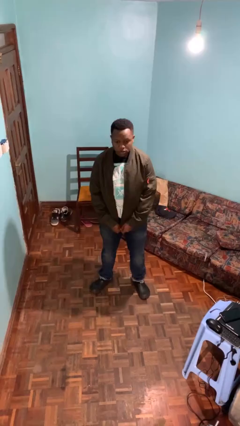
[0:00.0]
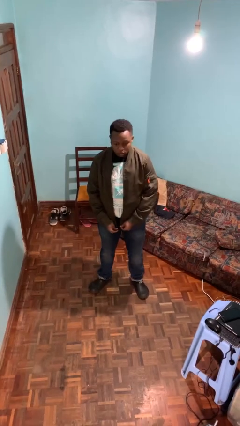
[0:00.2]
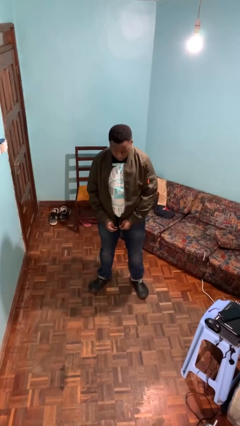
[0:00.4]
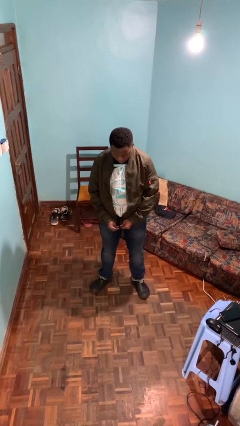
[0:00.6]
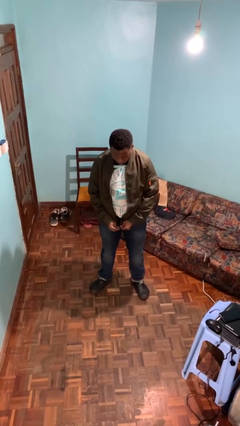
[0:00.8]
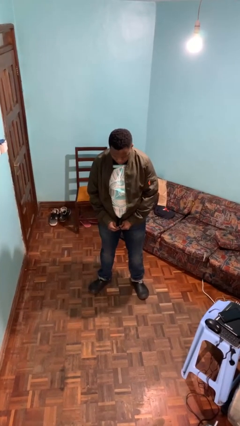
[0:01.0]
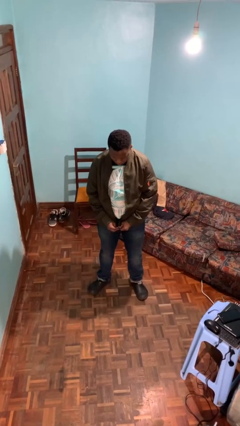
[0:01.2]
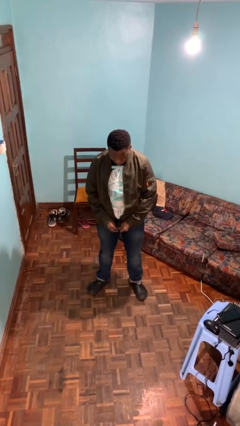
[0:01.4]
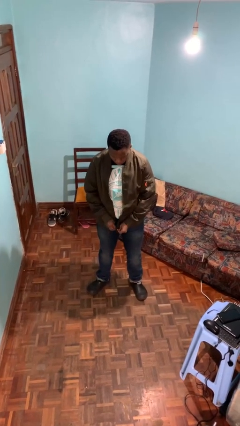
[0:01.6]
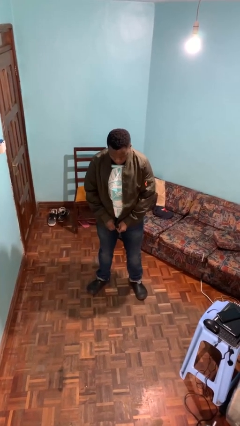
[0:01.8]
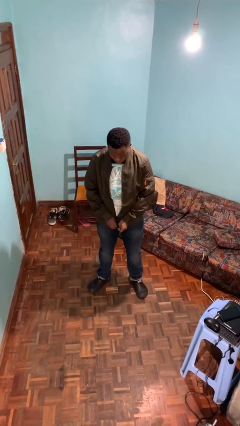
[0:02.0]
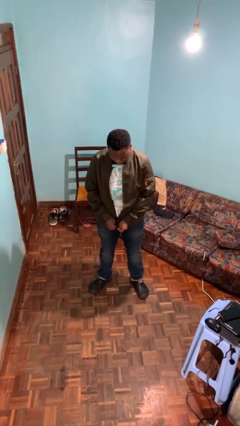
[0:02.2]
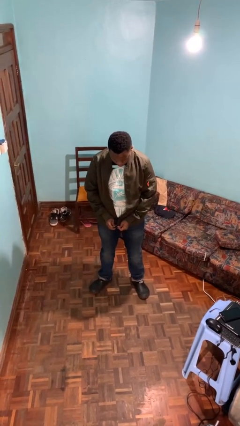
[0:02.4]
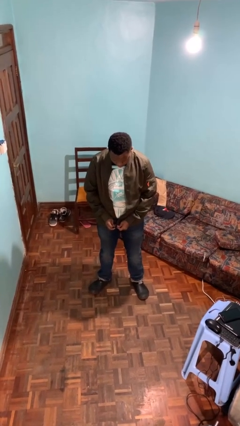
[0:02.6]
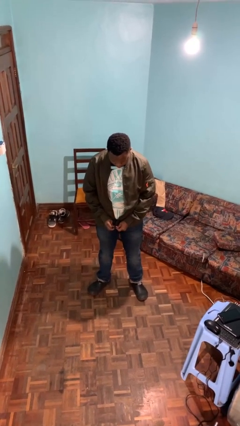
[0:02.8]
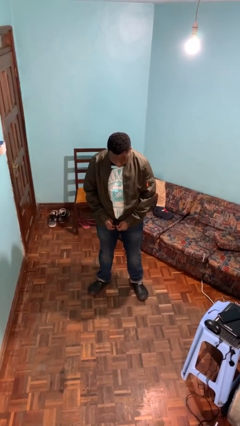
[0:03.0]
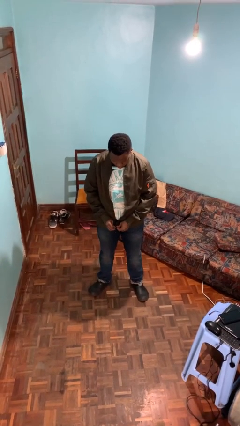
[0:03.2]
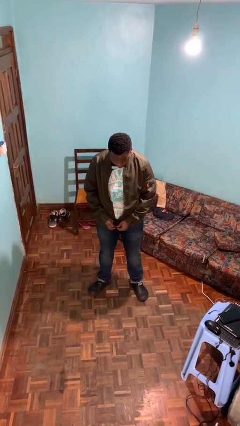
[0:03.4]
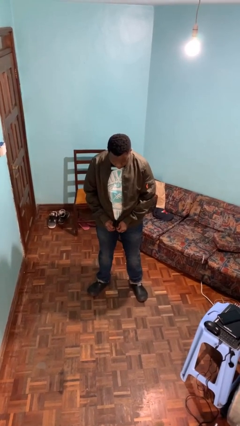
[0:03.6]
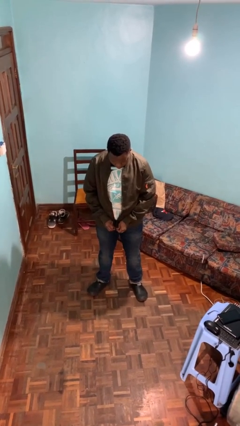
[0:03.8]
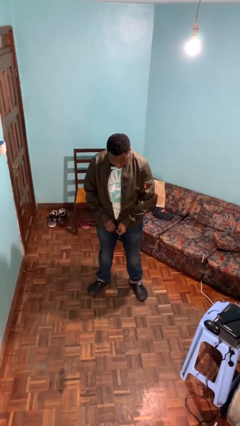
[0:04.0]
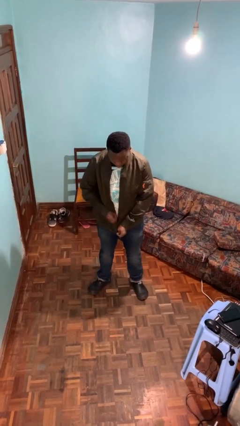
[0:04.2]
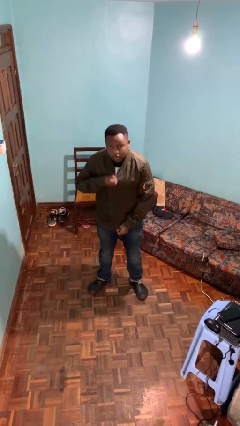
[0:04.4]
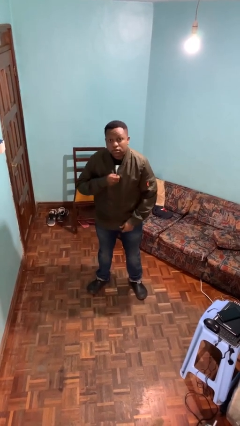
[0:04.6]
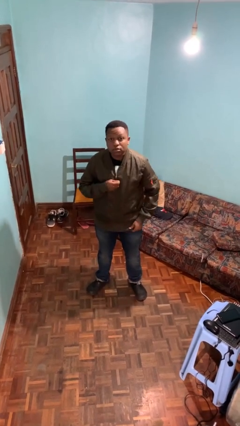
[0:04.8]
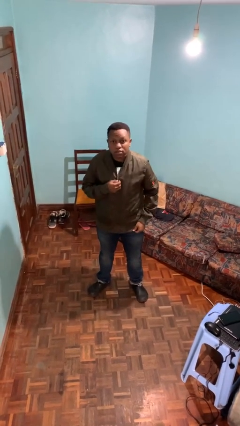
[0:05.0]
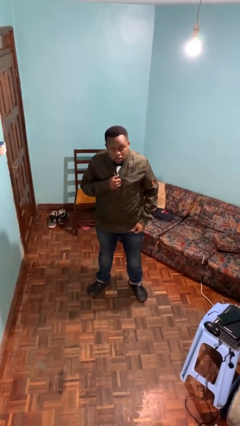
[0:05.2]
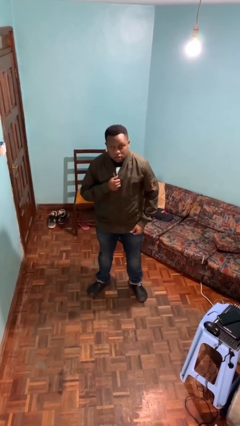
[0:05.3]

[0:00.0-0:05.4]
person zips up jacket

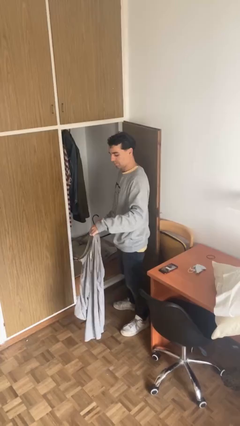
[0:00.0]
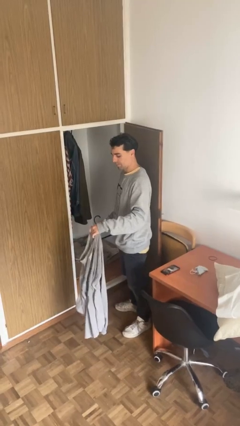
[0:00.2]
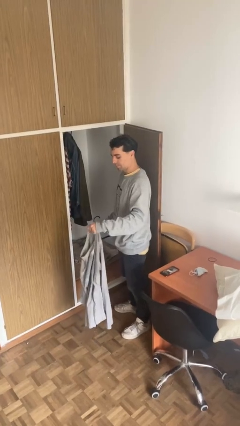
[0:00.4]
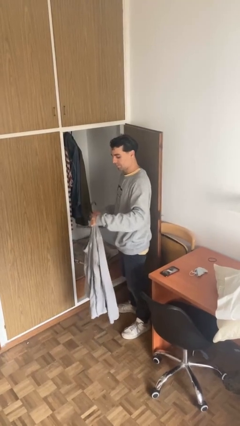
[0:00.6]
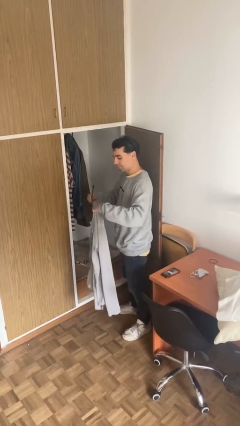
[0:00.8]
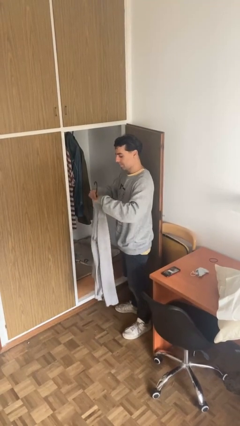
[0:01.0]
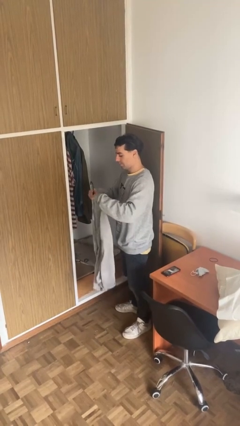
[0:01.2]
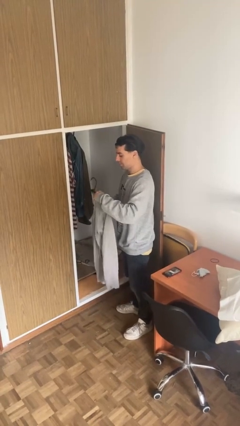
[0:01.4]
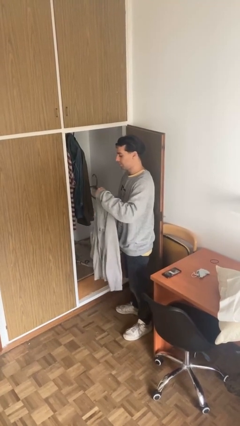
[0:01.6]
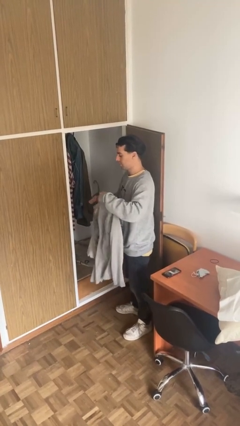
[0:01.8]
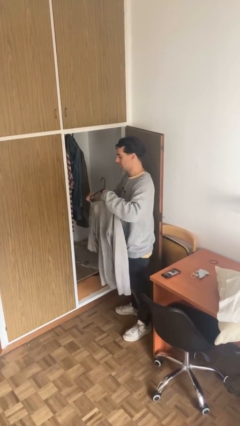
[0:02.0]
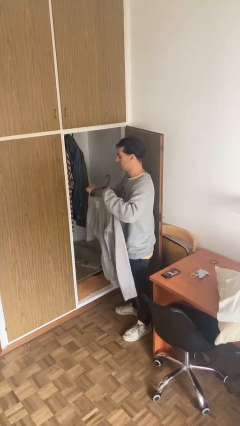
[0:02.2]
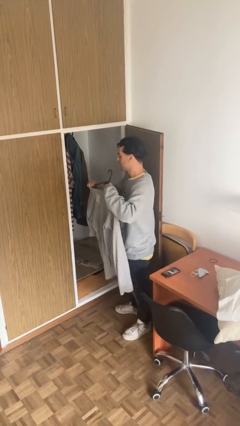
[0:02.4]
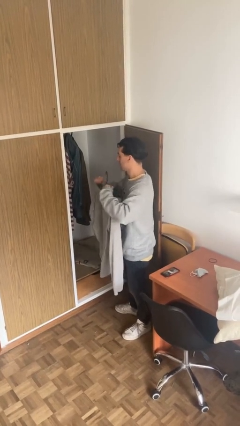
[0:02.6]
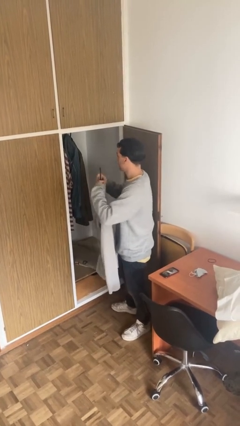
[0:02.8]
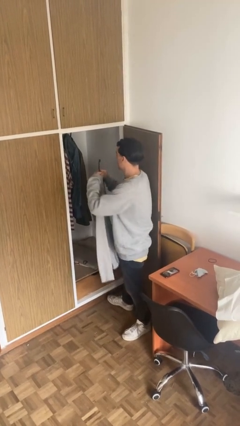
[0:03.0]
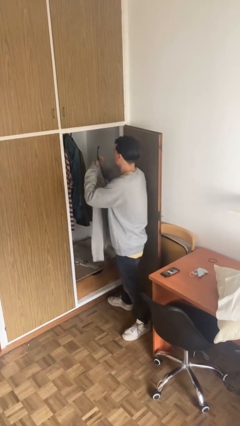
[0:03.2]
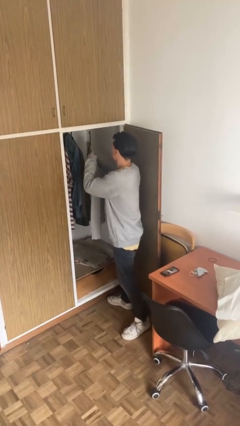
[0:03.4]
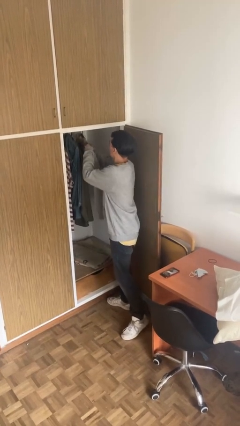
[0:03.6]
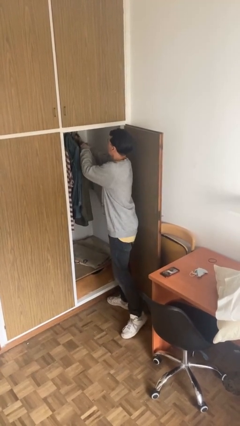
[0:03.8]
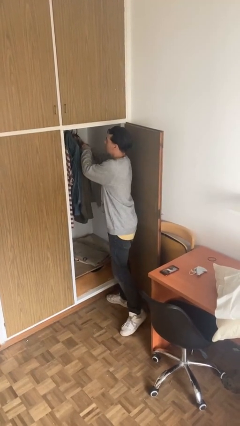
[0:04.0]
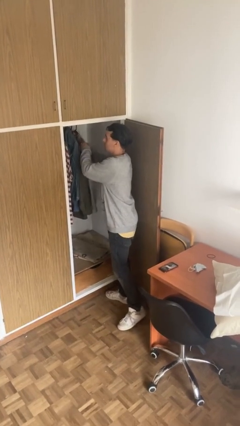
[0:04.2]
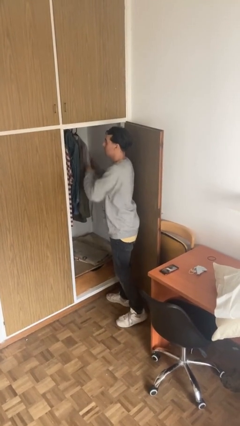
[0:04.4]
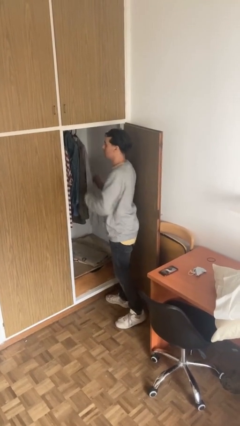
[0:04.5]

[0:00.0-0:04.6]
person puts clothes into closet

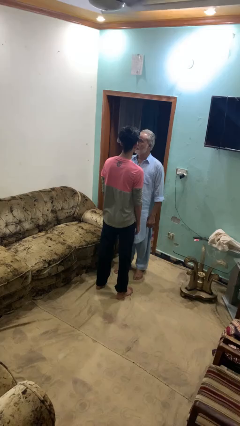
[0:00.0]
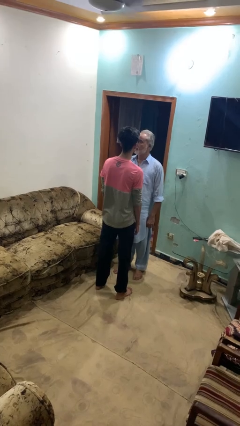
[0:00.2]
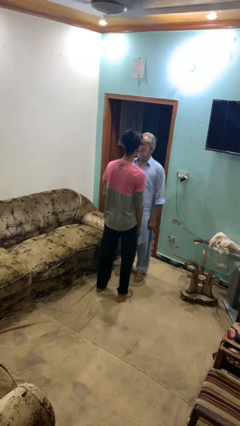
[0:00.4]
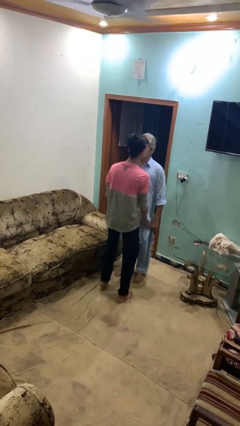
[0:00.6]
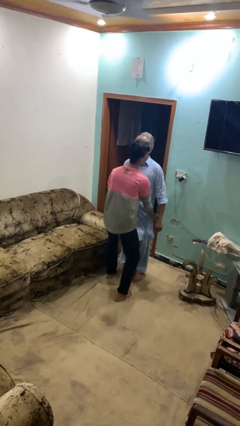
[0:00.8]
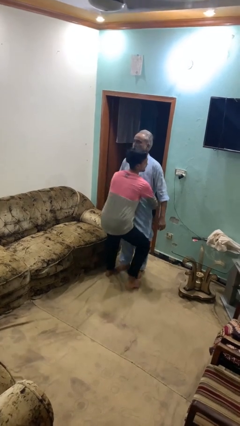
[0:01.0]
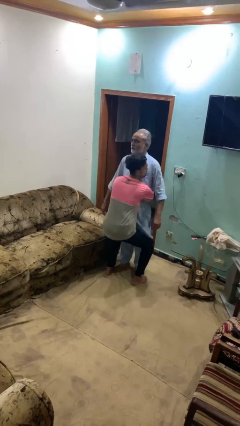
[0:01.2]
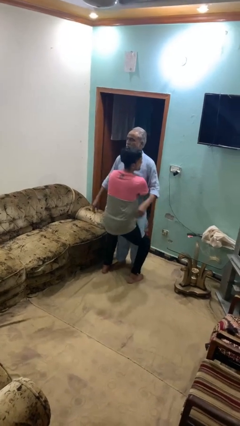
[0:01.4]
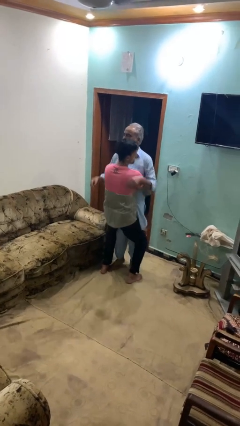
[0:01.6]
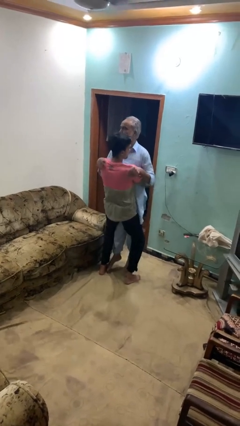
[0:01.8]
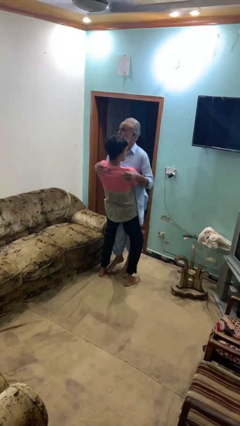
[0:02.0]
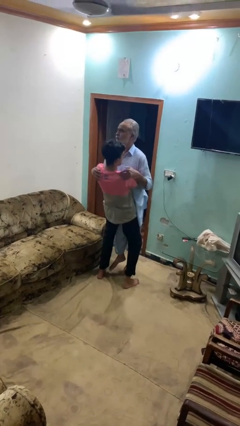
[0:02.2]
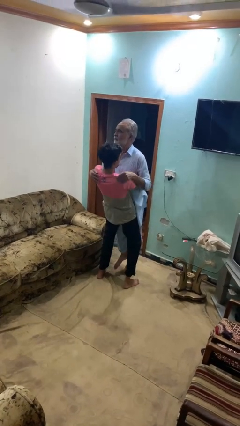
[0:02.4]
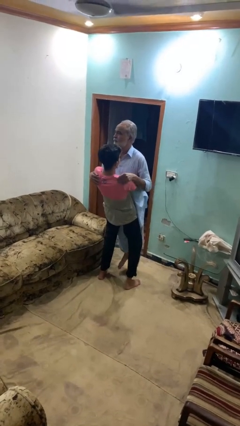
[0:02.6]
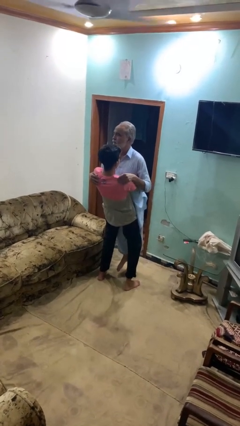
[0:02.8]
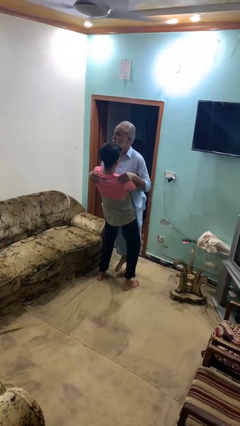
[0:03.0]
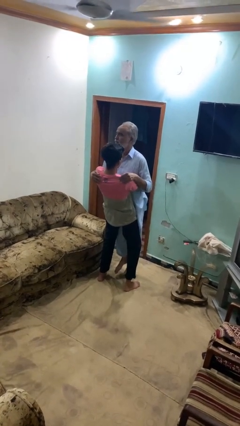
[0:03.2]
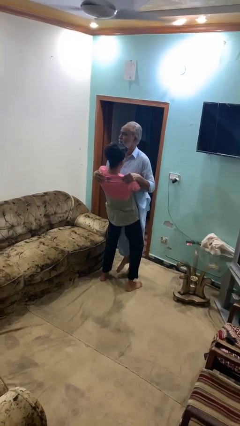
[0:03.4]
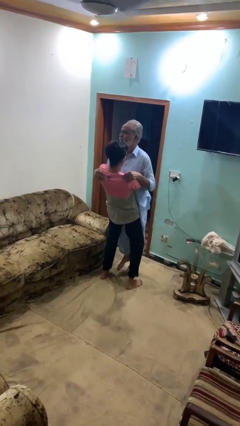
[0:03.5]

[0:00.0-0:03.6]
person picks up person

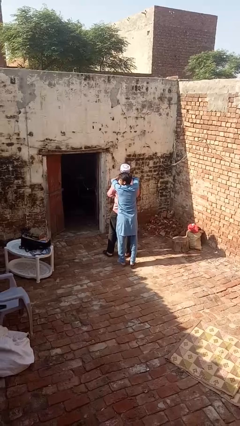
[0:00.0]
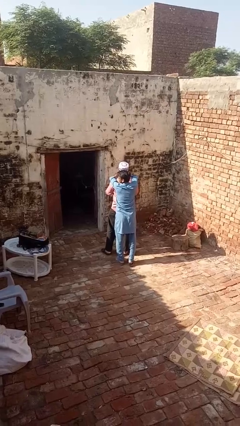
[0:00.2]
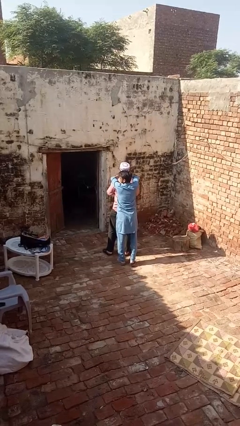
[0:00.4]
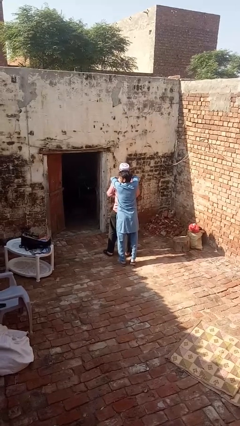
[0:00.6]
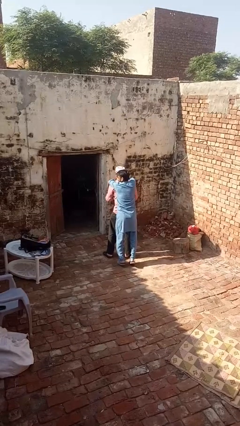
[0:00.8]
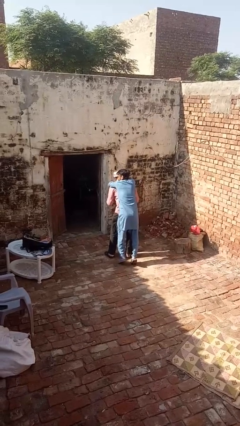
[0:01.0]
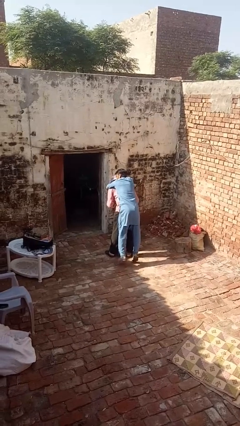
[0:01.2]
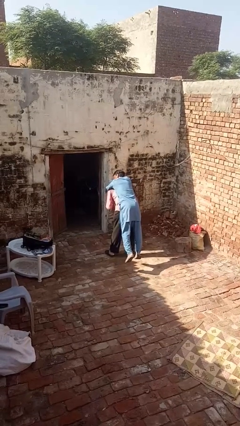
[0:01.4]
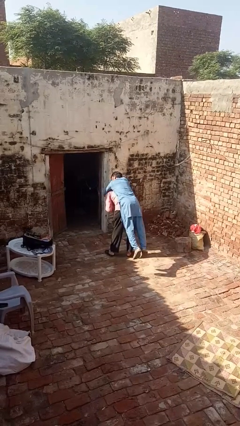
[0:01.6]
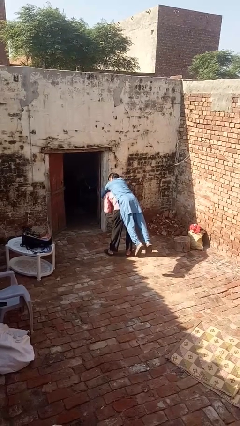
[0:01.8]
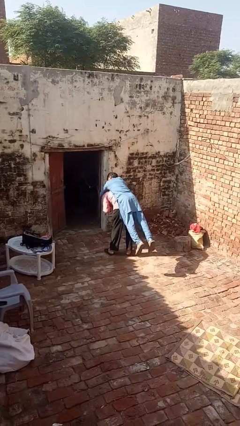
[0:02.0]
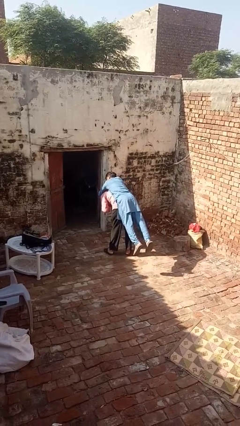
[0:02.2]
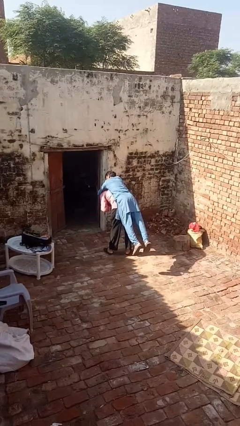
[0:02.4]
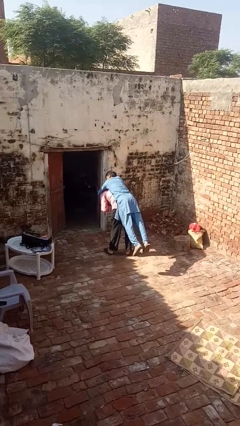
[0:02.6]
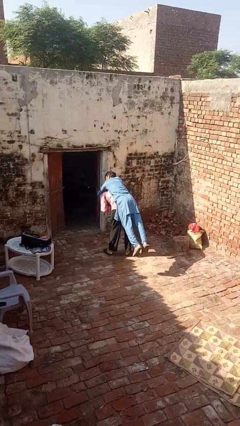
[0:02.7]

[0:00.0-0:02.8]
person carries person over shoulder

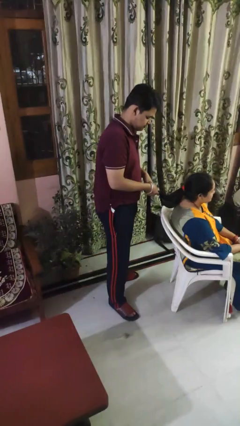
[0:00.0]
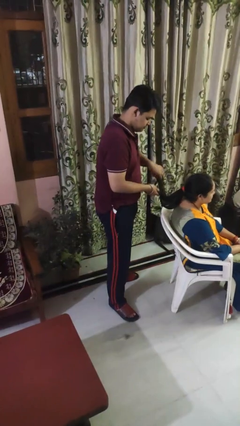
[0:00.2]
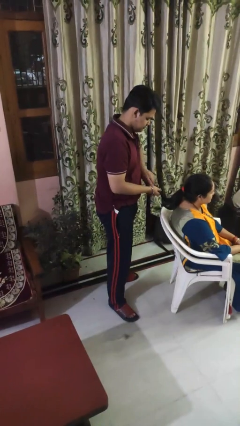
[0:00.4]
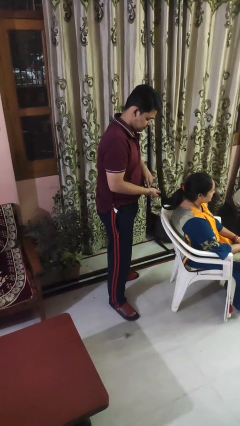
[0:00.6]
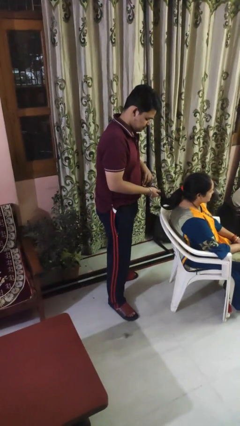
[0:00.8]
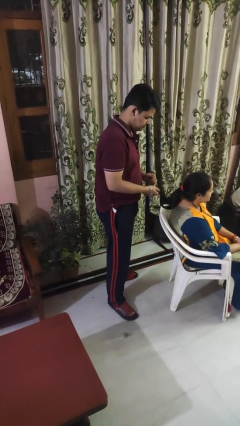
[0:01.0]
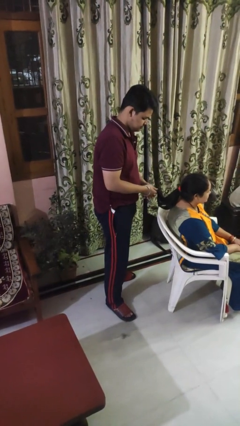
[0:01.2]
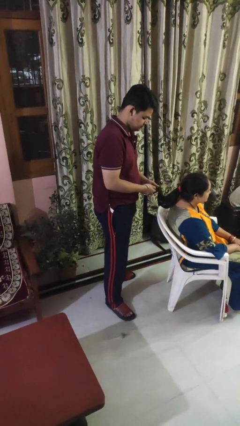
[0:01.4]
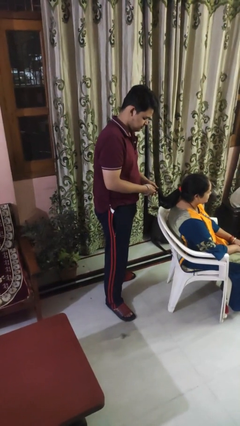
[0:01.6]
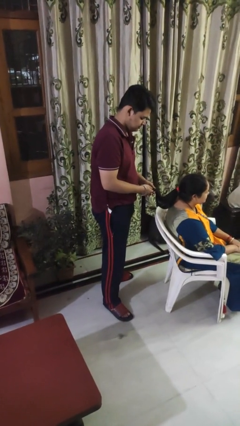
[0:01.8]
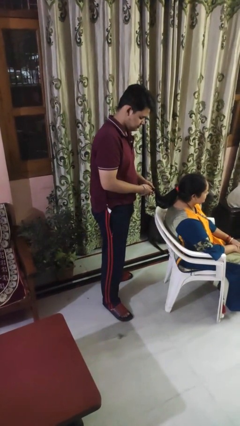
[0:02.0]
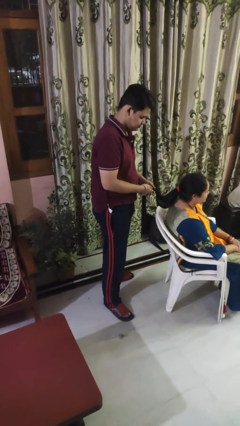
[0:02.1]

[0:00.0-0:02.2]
person braids hair of person
